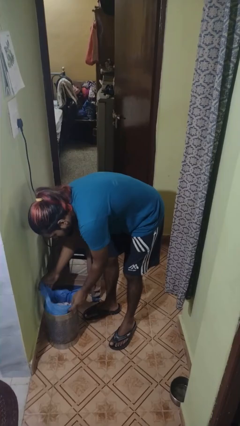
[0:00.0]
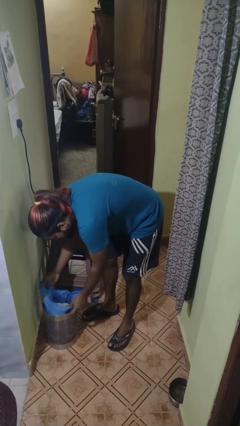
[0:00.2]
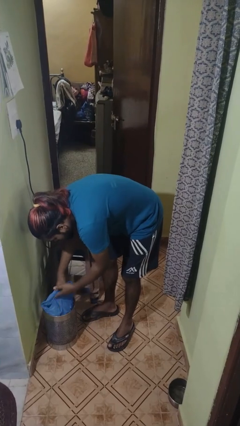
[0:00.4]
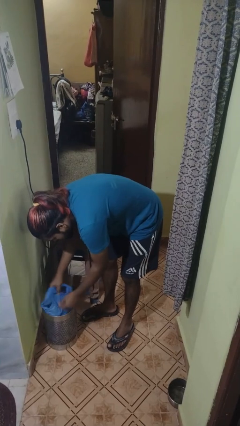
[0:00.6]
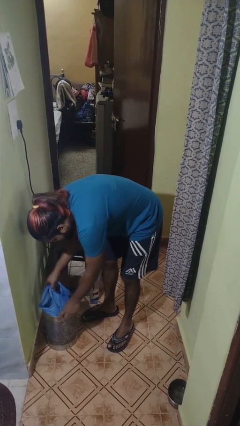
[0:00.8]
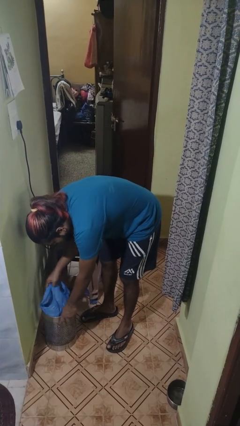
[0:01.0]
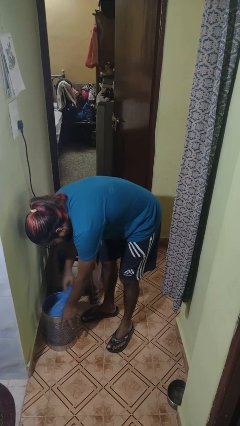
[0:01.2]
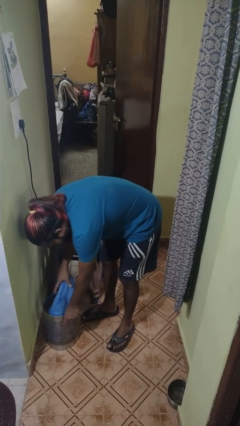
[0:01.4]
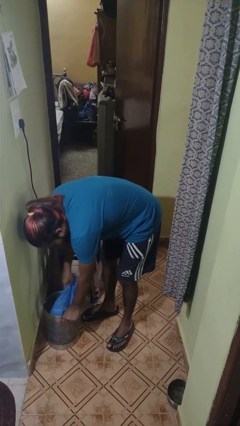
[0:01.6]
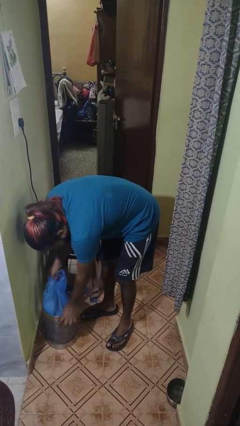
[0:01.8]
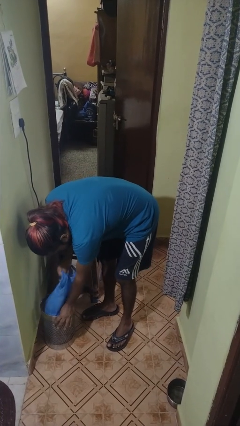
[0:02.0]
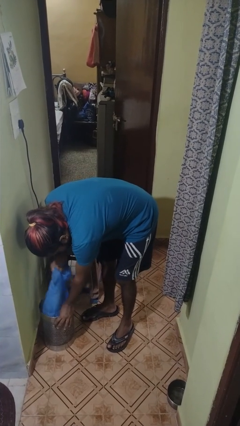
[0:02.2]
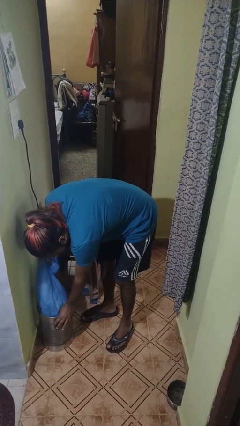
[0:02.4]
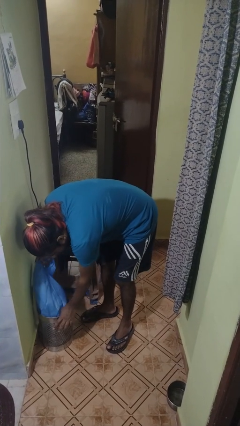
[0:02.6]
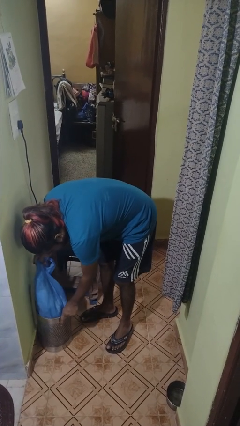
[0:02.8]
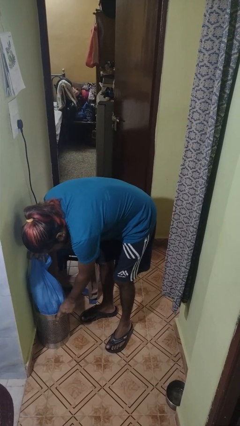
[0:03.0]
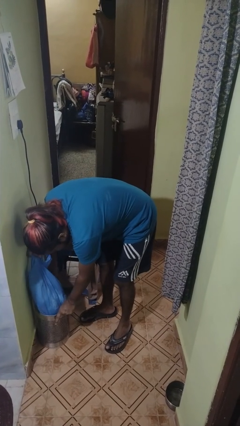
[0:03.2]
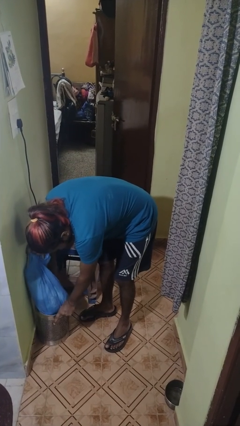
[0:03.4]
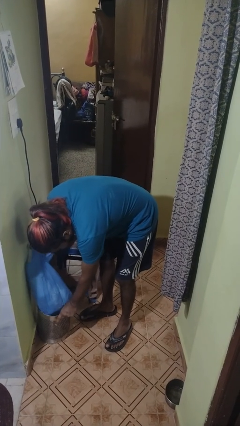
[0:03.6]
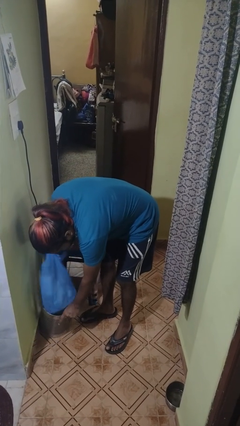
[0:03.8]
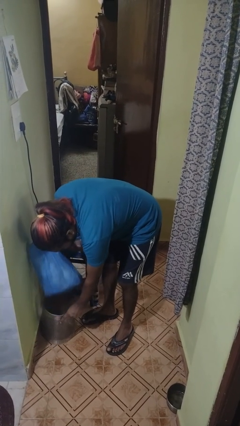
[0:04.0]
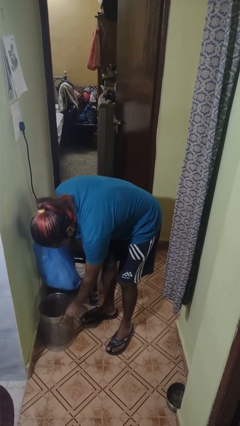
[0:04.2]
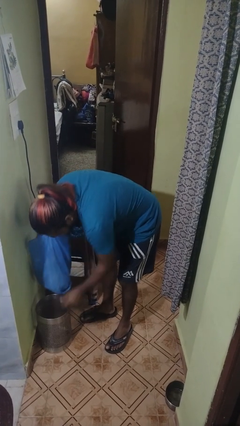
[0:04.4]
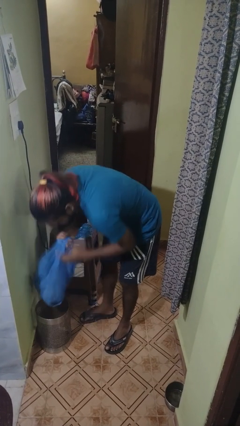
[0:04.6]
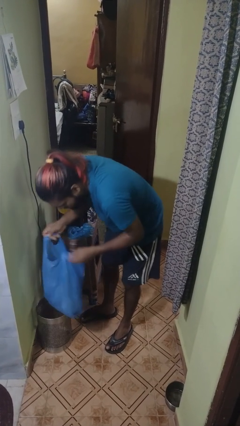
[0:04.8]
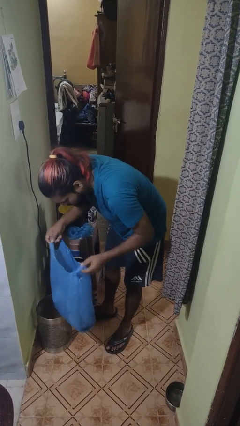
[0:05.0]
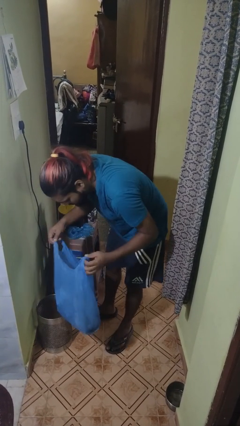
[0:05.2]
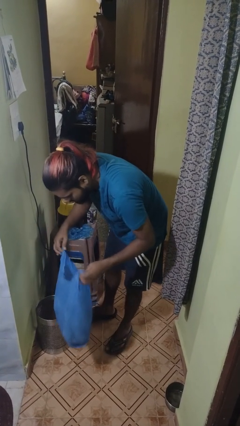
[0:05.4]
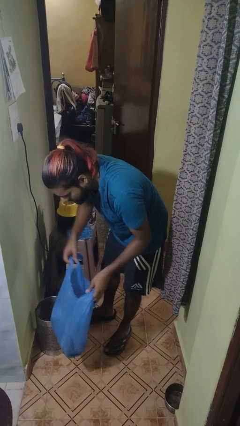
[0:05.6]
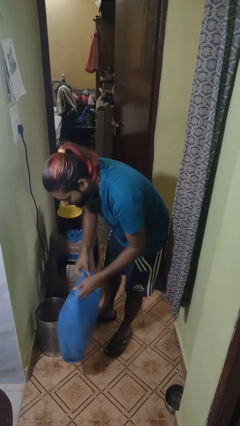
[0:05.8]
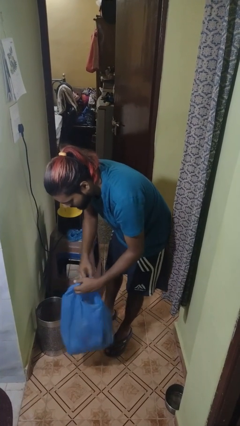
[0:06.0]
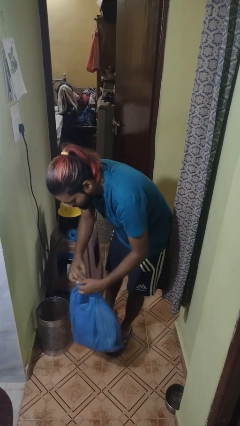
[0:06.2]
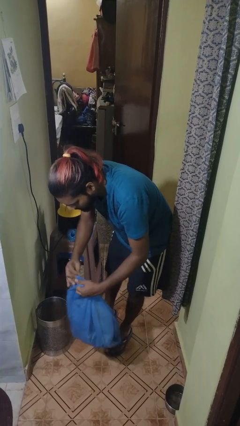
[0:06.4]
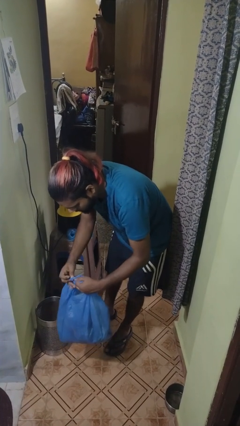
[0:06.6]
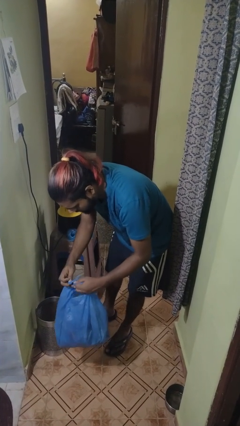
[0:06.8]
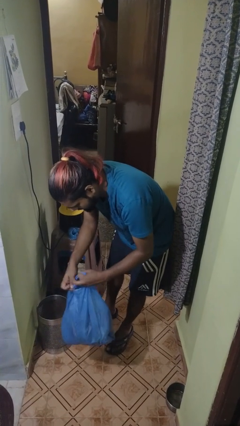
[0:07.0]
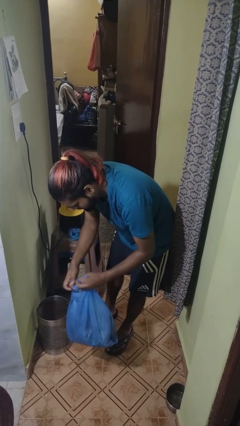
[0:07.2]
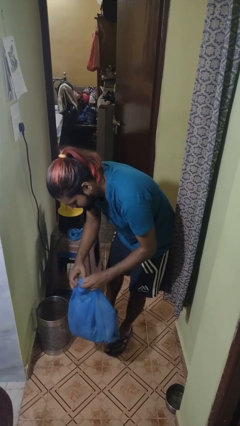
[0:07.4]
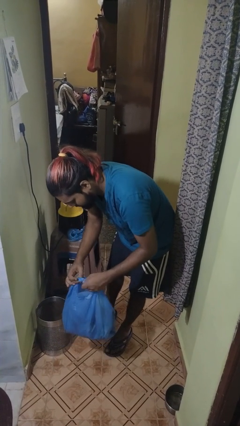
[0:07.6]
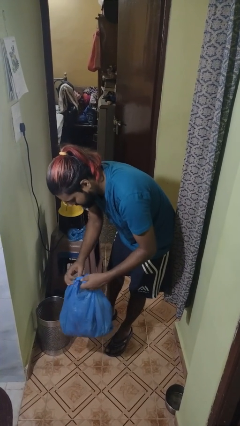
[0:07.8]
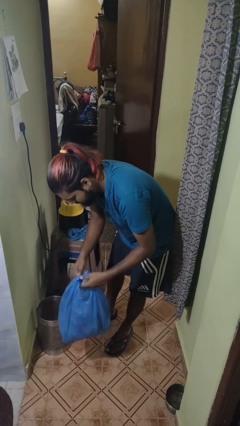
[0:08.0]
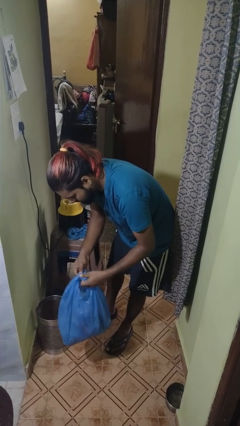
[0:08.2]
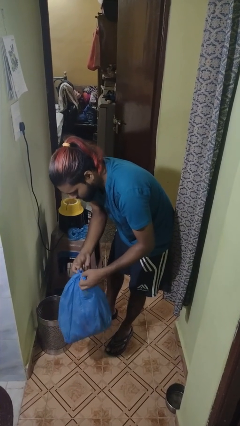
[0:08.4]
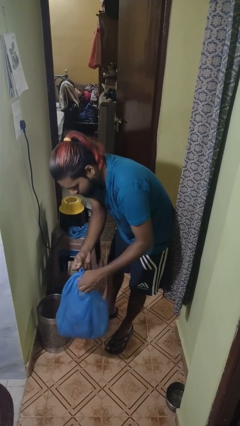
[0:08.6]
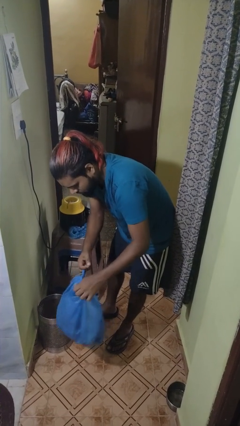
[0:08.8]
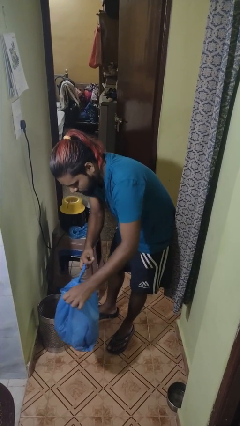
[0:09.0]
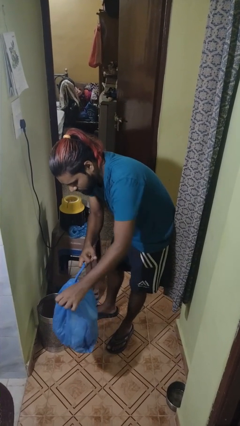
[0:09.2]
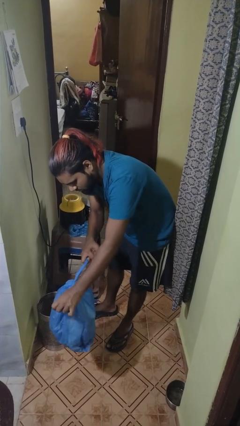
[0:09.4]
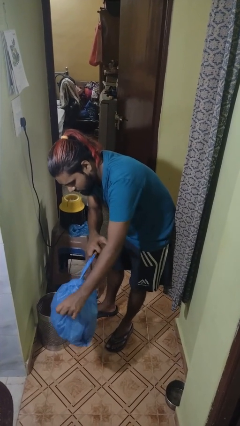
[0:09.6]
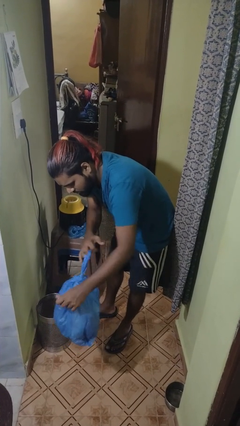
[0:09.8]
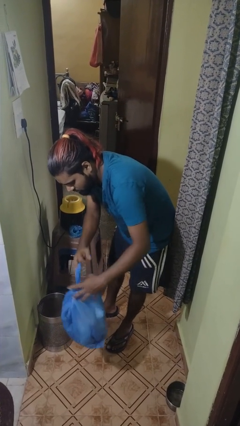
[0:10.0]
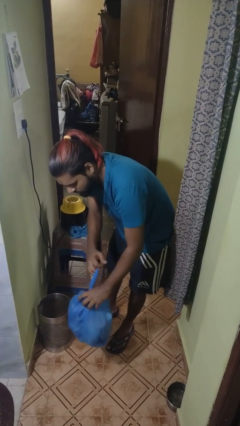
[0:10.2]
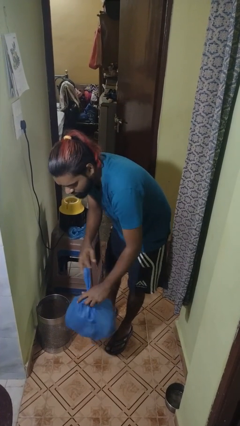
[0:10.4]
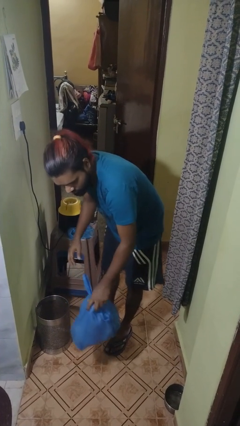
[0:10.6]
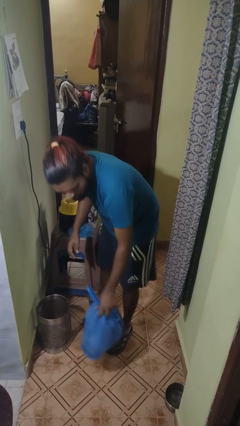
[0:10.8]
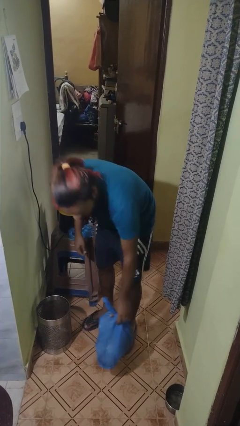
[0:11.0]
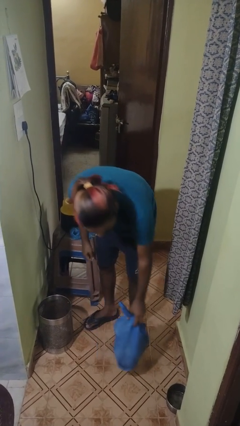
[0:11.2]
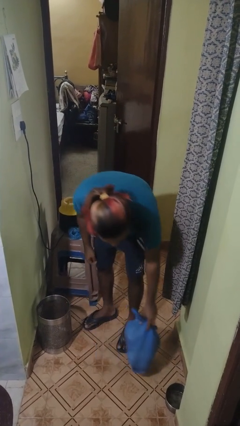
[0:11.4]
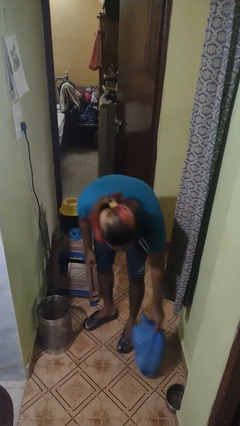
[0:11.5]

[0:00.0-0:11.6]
person removes trashbag from trashcan

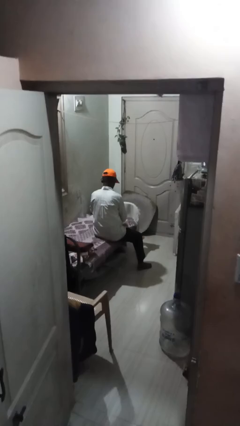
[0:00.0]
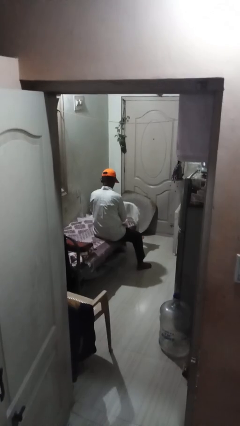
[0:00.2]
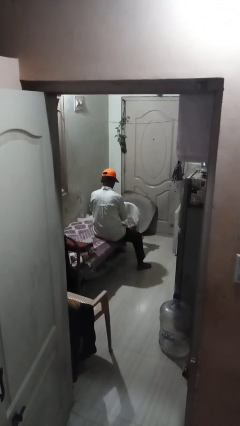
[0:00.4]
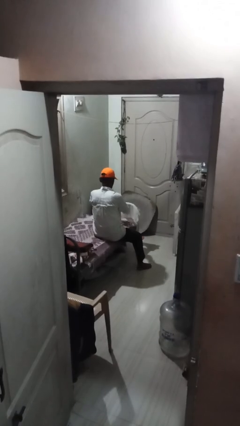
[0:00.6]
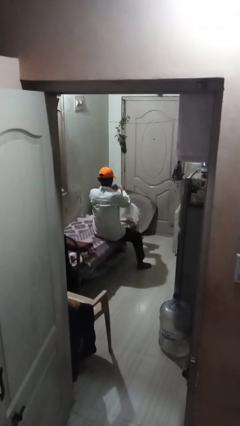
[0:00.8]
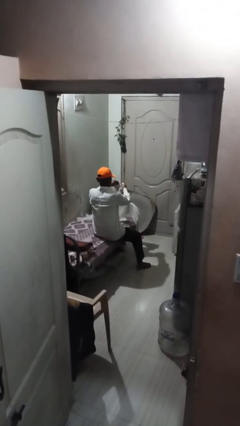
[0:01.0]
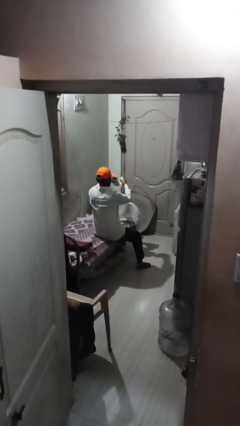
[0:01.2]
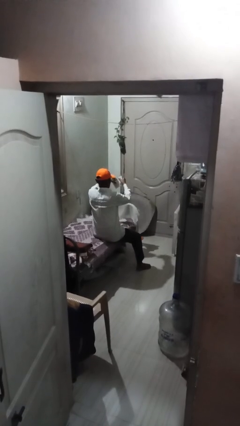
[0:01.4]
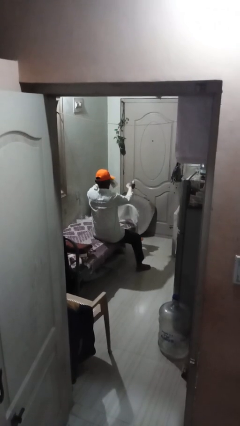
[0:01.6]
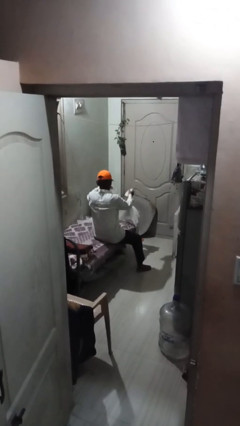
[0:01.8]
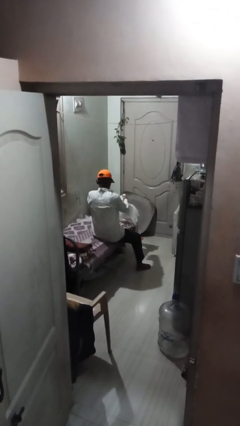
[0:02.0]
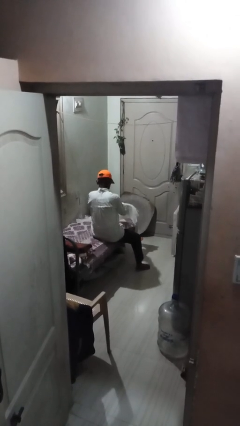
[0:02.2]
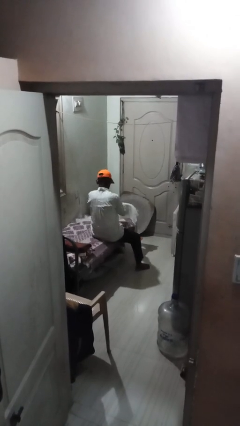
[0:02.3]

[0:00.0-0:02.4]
person tears paper

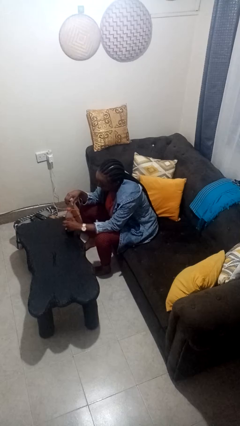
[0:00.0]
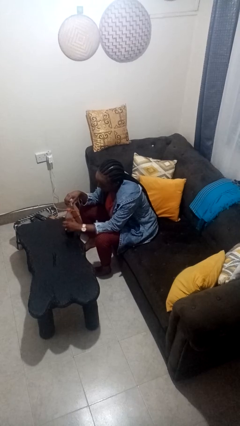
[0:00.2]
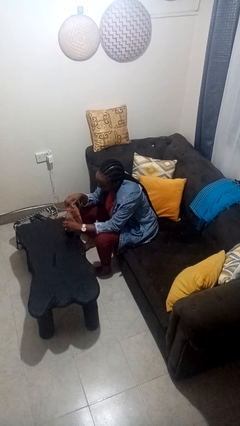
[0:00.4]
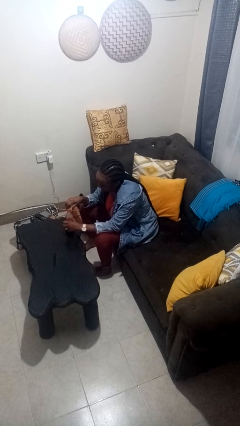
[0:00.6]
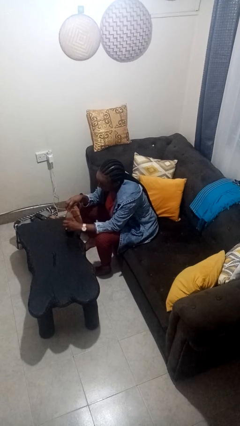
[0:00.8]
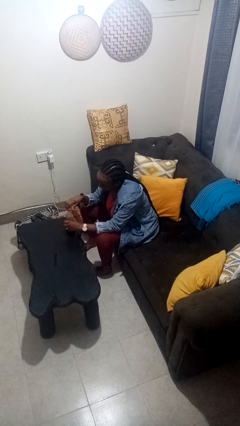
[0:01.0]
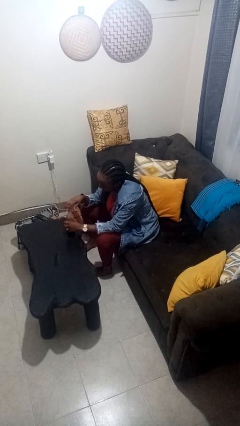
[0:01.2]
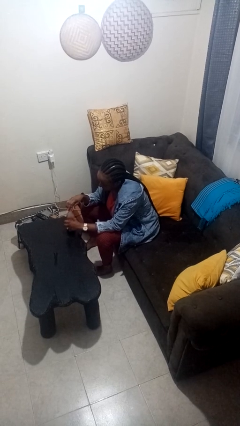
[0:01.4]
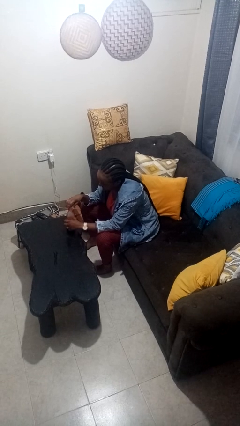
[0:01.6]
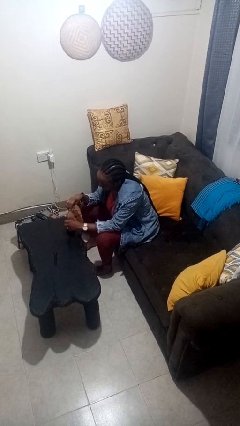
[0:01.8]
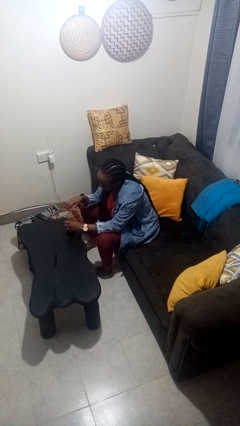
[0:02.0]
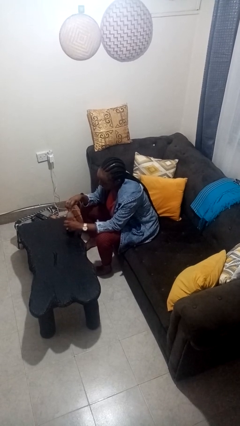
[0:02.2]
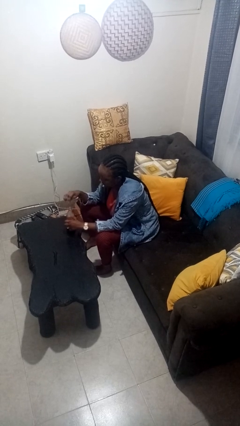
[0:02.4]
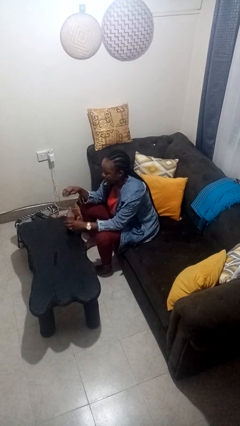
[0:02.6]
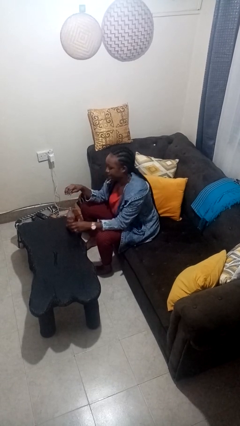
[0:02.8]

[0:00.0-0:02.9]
person unscrews lid from bottle

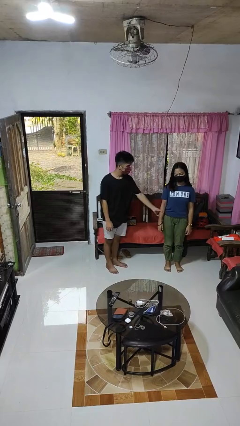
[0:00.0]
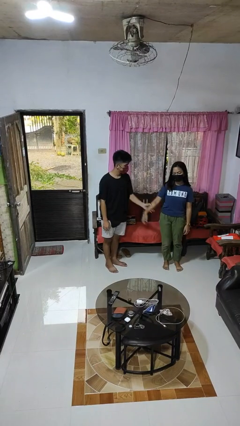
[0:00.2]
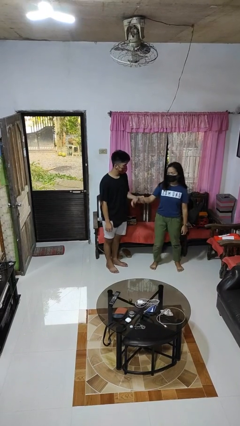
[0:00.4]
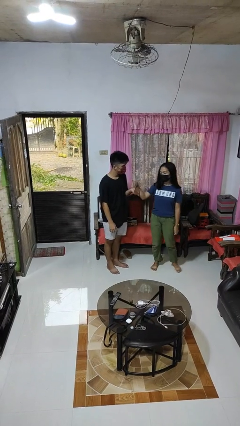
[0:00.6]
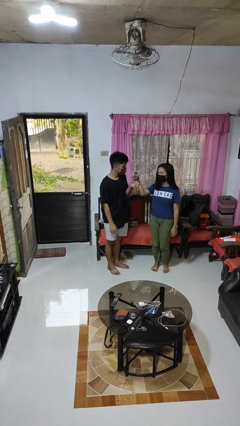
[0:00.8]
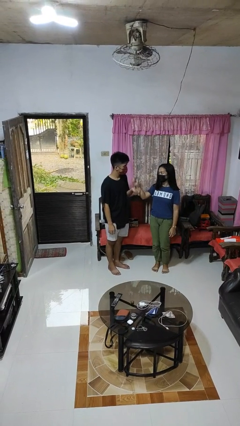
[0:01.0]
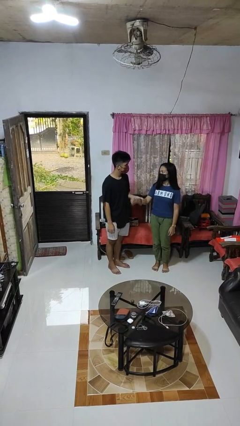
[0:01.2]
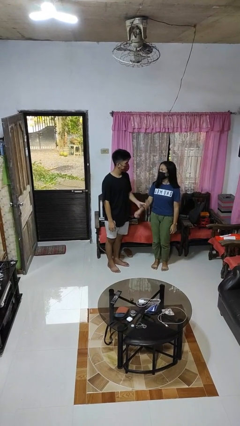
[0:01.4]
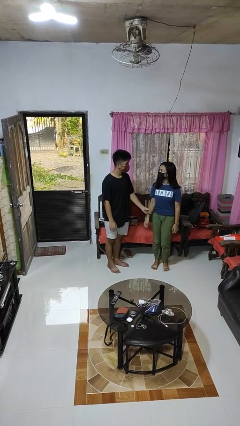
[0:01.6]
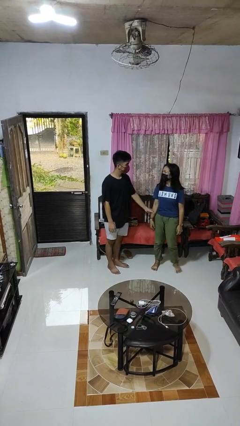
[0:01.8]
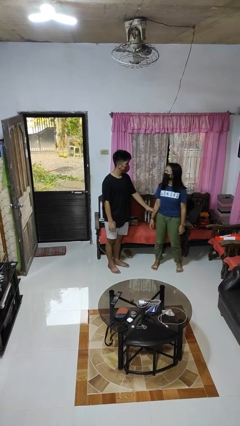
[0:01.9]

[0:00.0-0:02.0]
person grabs person by forearm
